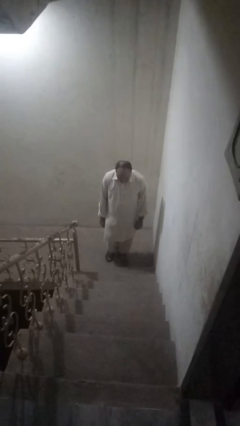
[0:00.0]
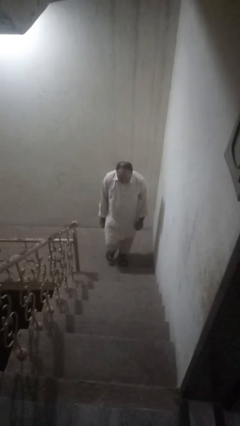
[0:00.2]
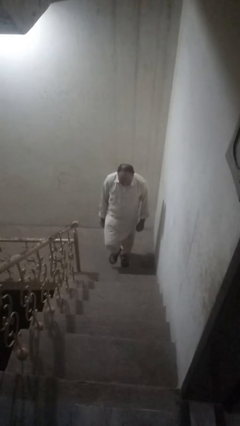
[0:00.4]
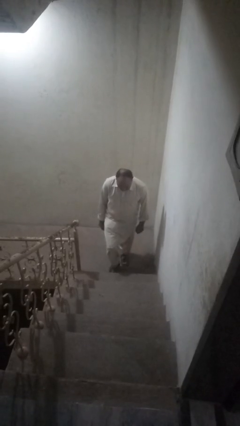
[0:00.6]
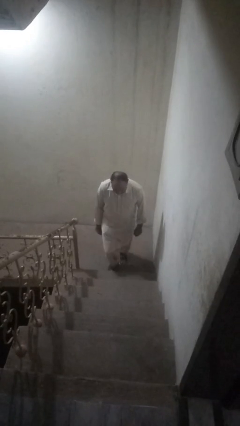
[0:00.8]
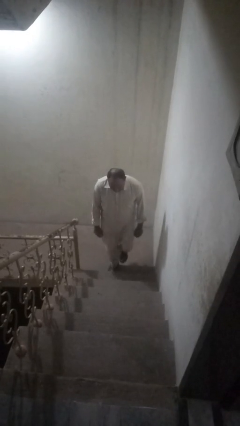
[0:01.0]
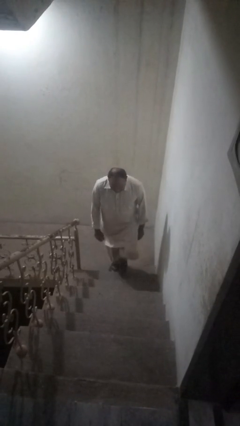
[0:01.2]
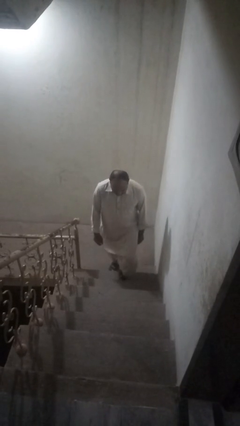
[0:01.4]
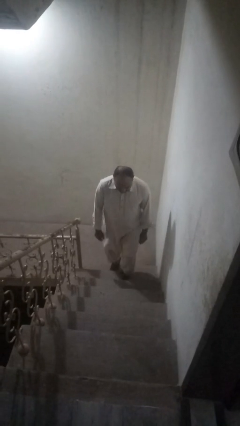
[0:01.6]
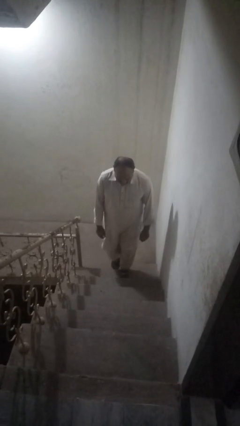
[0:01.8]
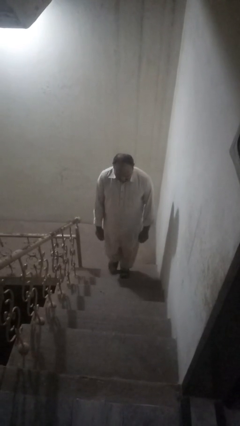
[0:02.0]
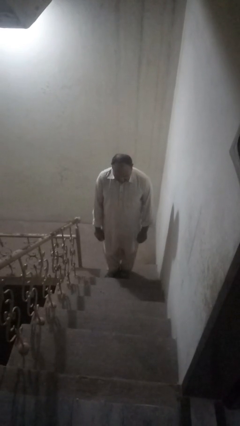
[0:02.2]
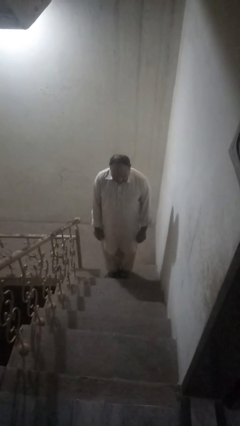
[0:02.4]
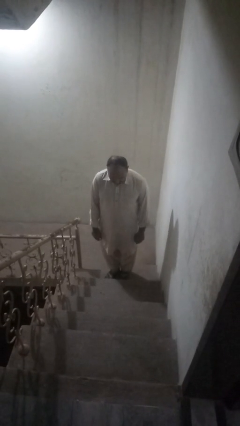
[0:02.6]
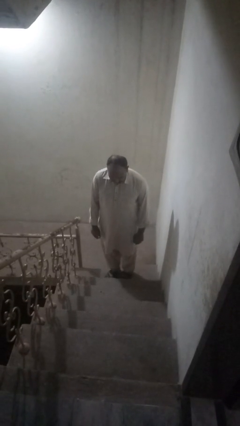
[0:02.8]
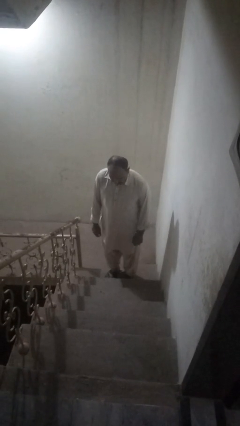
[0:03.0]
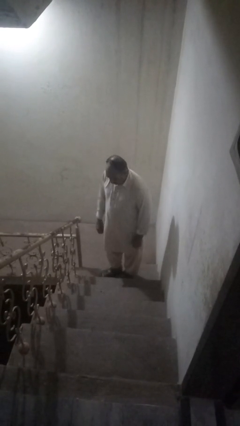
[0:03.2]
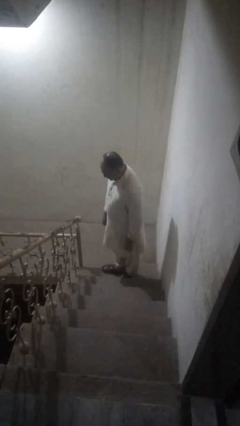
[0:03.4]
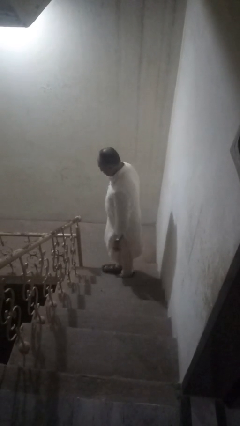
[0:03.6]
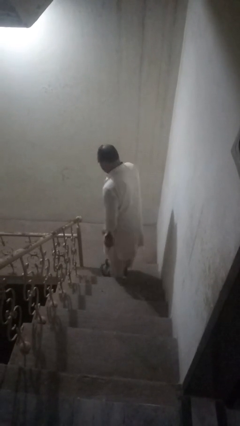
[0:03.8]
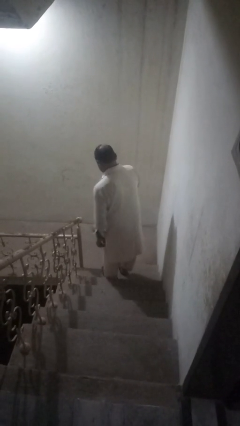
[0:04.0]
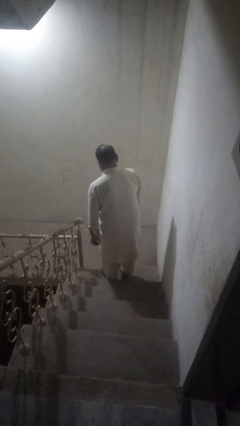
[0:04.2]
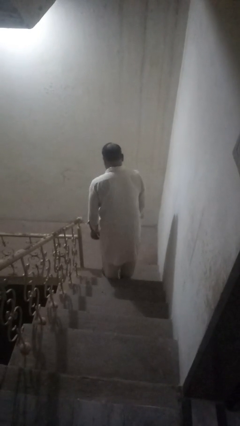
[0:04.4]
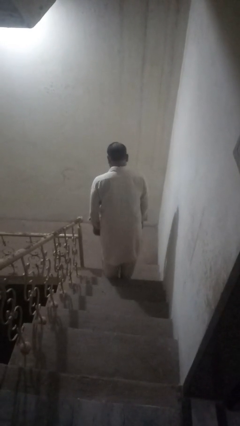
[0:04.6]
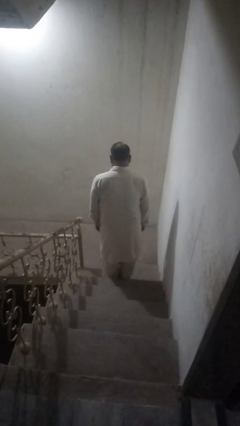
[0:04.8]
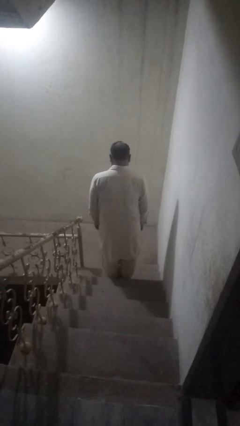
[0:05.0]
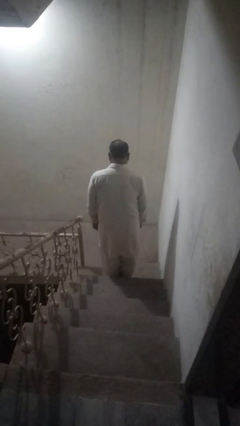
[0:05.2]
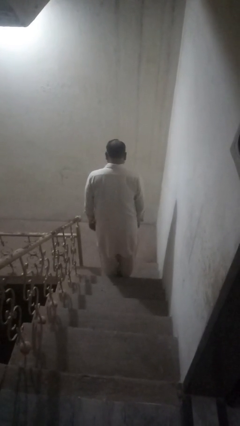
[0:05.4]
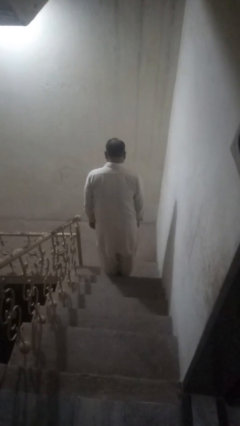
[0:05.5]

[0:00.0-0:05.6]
person climbs up stairs

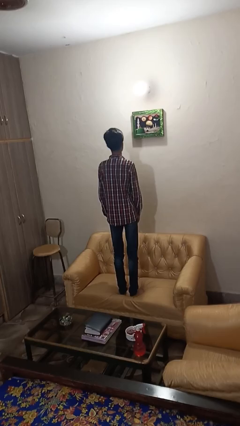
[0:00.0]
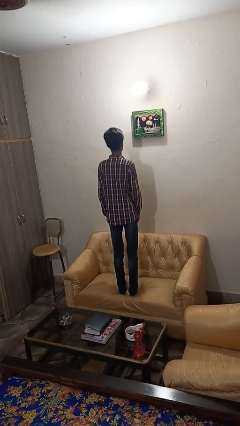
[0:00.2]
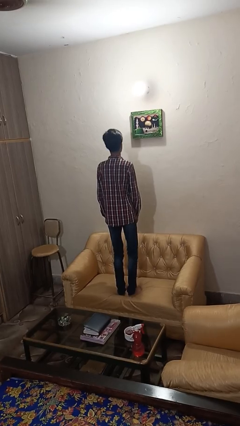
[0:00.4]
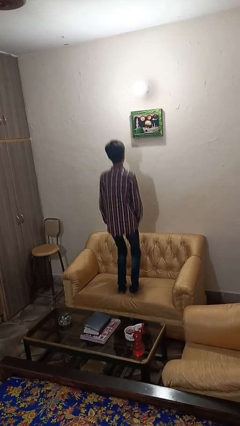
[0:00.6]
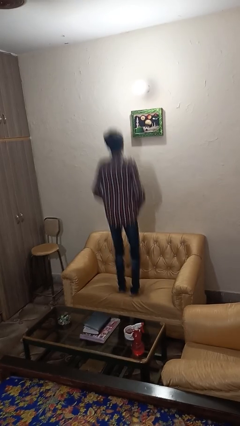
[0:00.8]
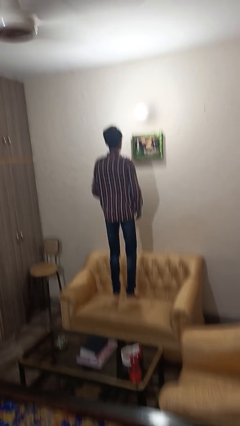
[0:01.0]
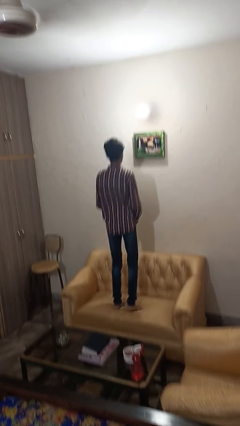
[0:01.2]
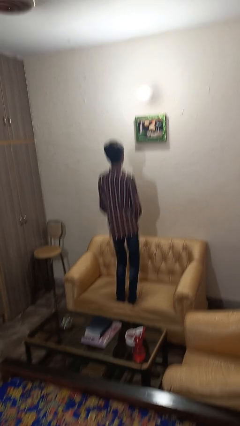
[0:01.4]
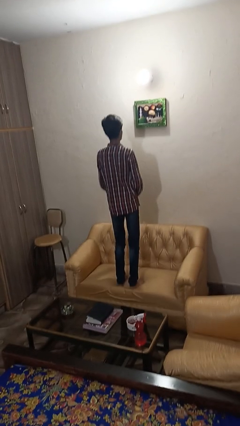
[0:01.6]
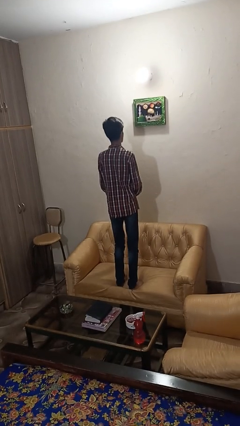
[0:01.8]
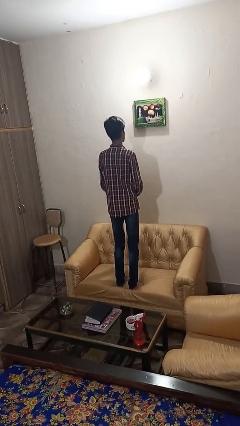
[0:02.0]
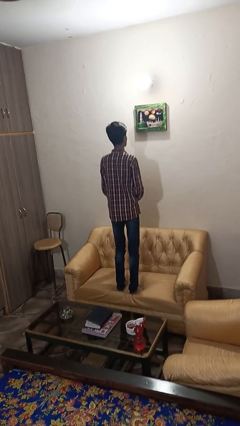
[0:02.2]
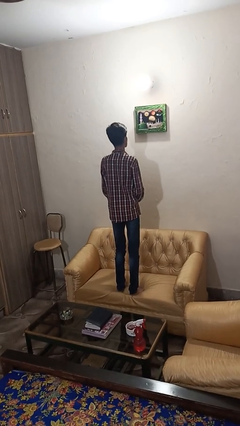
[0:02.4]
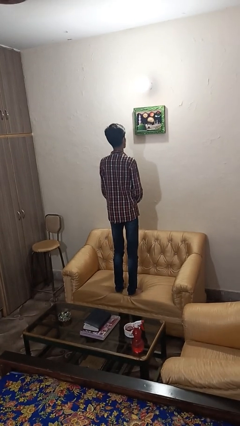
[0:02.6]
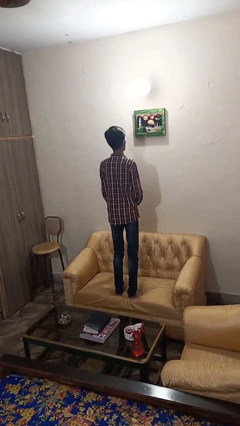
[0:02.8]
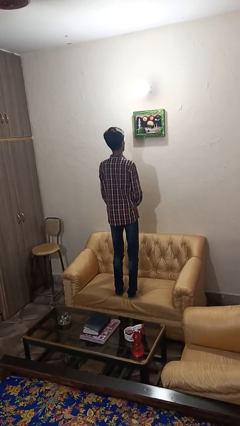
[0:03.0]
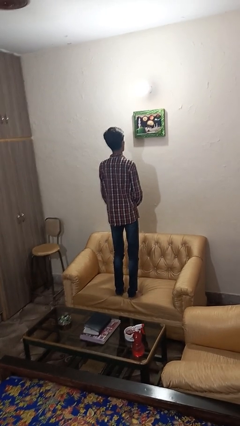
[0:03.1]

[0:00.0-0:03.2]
person jumps on couch

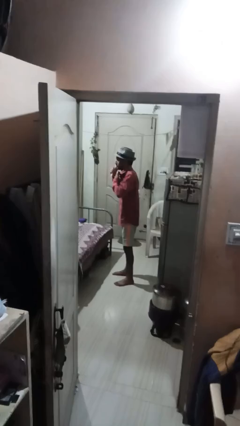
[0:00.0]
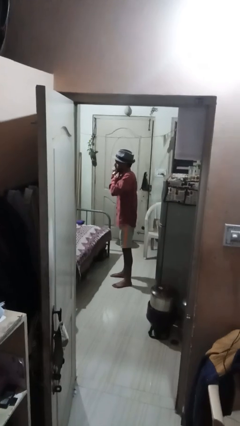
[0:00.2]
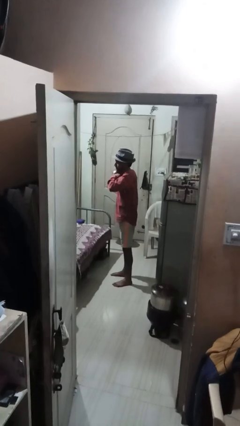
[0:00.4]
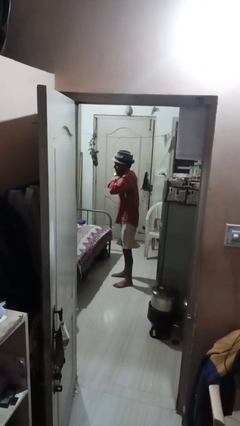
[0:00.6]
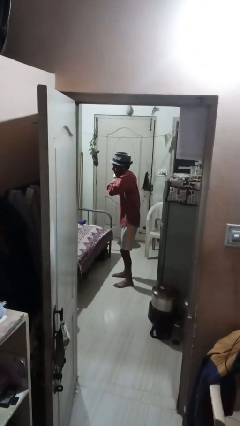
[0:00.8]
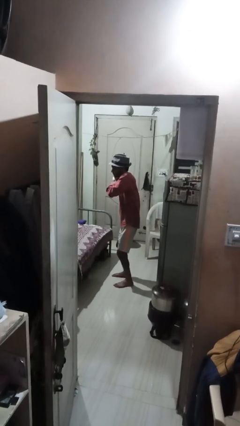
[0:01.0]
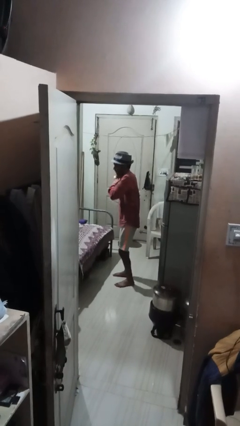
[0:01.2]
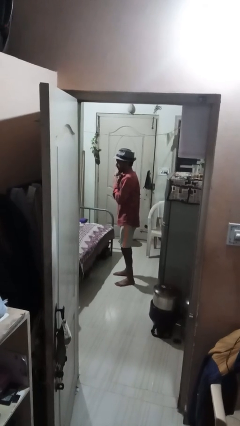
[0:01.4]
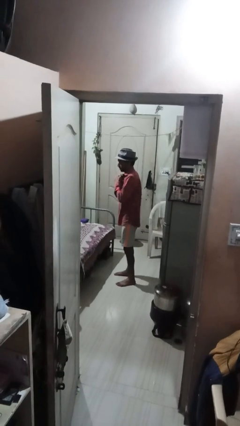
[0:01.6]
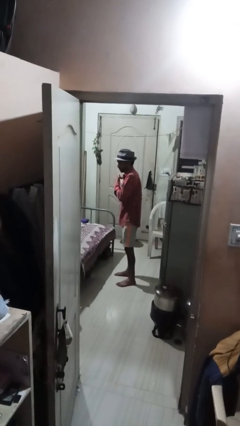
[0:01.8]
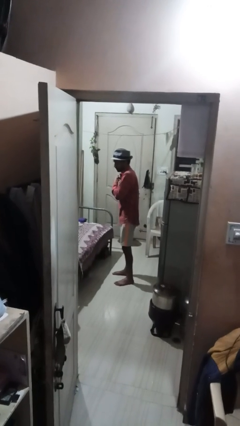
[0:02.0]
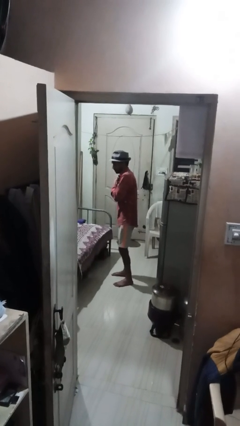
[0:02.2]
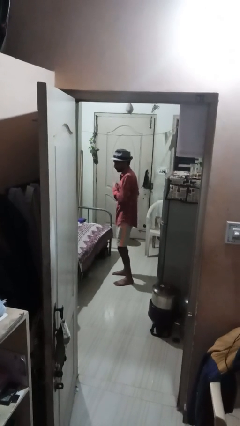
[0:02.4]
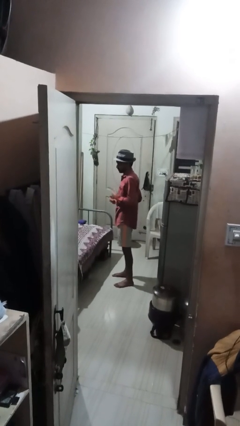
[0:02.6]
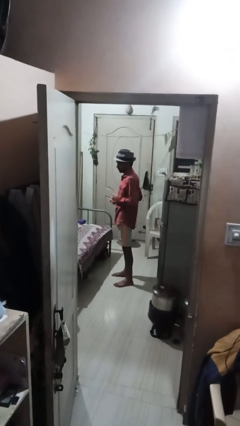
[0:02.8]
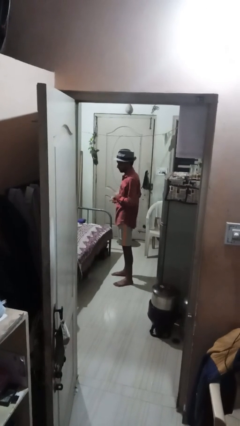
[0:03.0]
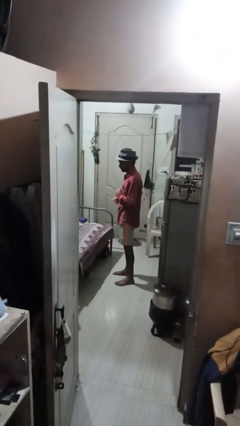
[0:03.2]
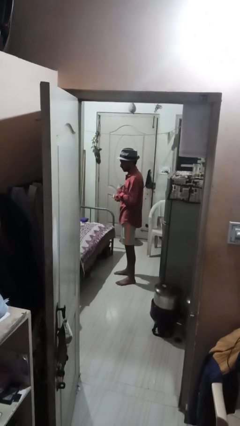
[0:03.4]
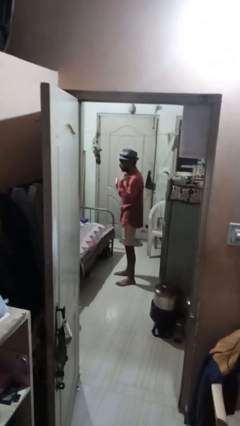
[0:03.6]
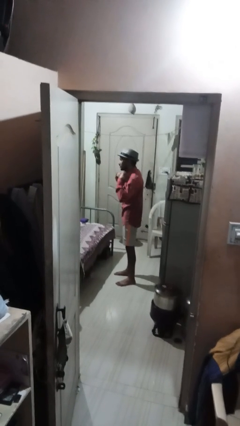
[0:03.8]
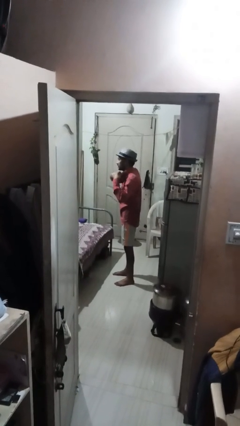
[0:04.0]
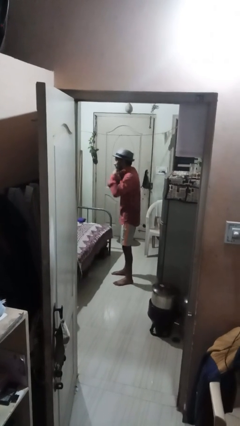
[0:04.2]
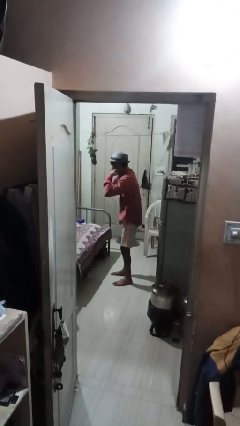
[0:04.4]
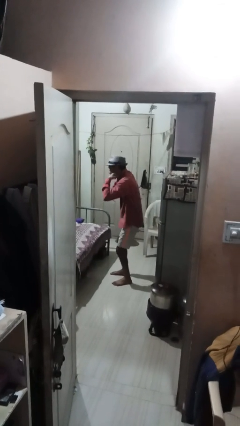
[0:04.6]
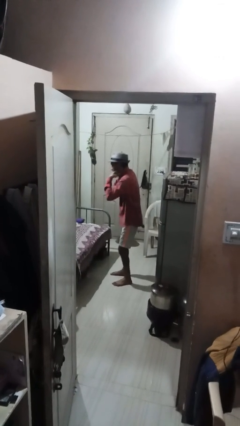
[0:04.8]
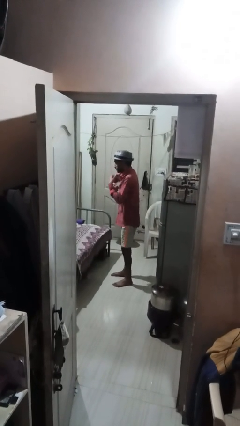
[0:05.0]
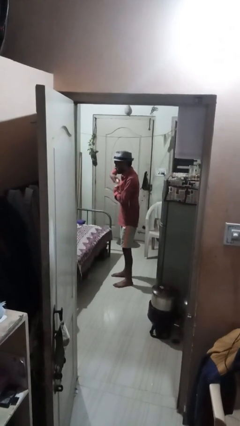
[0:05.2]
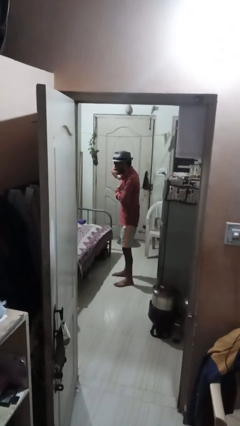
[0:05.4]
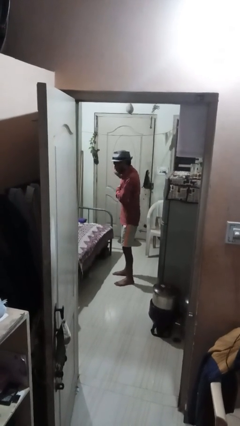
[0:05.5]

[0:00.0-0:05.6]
person applies deodorant

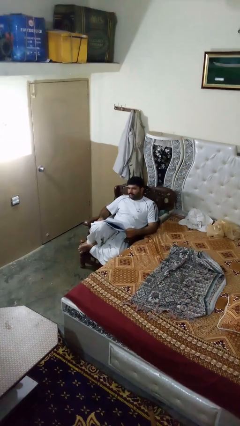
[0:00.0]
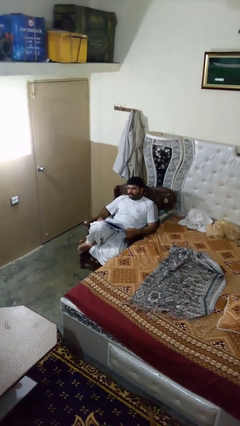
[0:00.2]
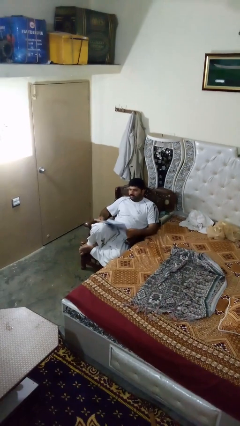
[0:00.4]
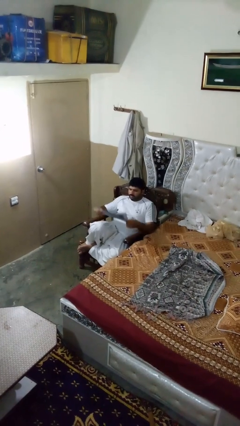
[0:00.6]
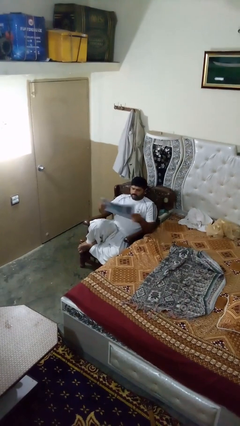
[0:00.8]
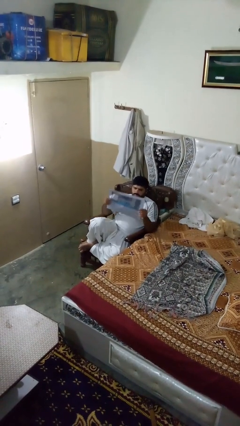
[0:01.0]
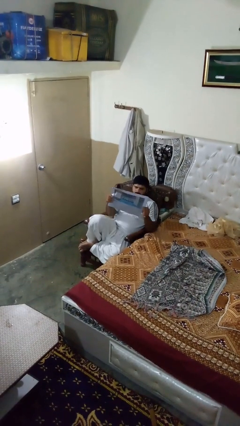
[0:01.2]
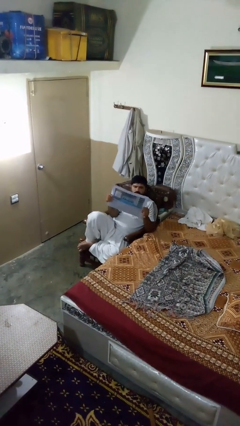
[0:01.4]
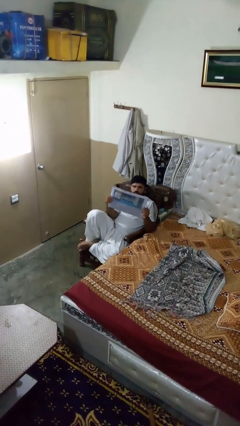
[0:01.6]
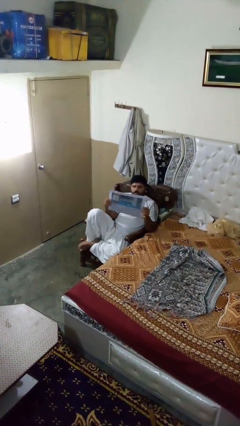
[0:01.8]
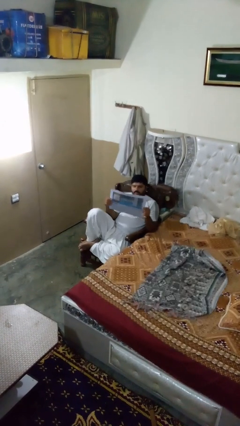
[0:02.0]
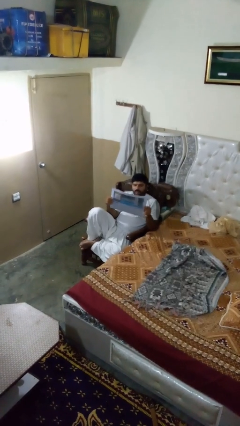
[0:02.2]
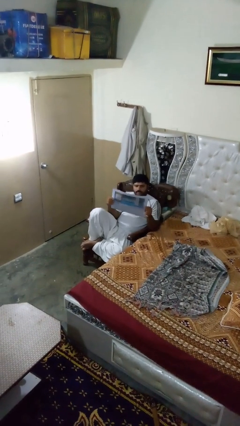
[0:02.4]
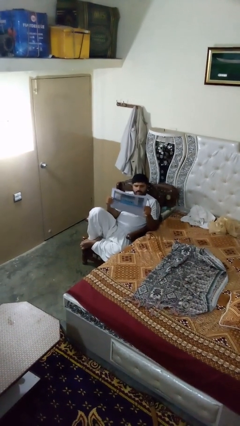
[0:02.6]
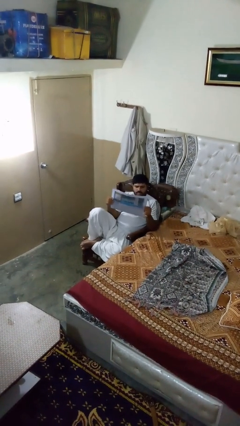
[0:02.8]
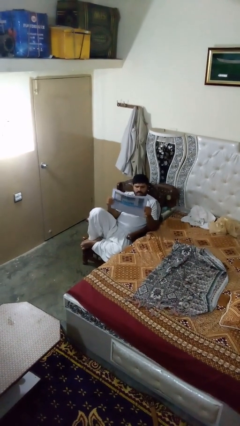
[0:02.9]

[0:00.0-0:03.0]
person reads newspaper

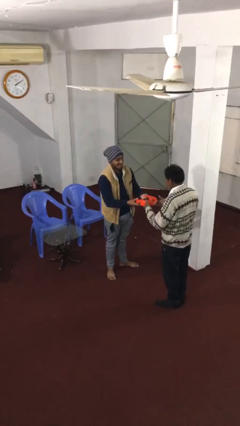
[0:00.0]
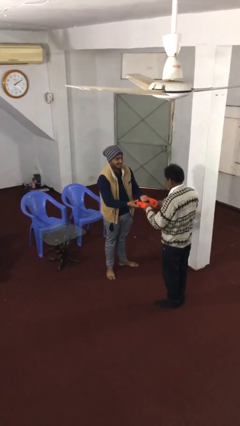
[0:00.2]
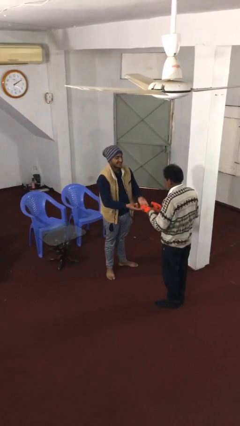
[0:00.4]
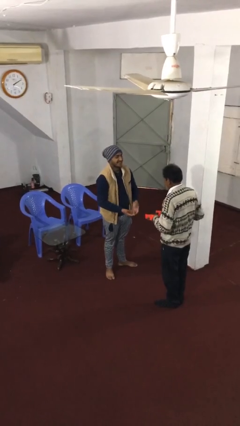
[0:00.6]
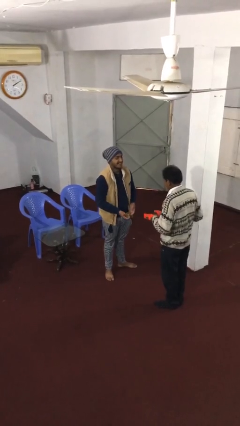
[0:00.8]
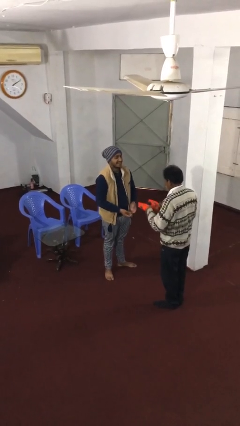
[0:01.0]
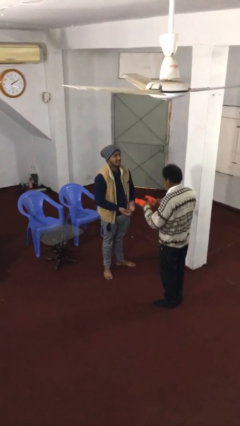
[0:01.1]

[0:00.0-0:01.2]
person transfers object to person
